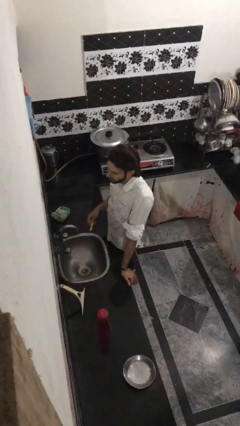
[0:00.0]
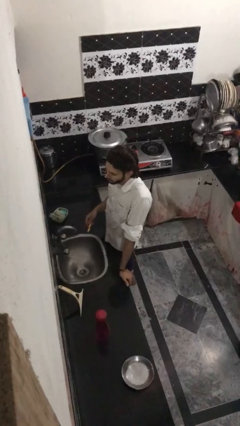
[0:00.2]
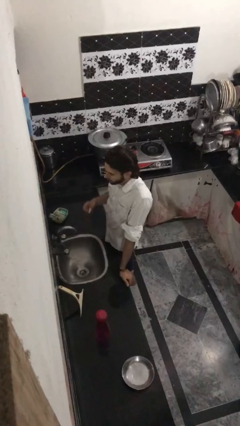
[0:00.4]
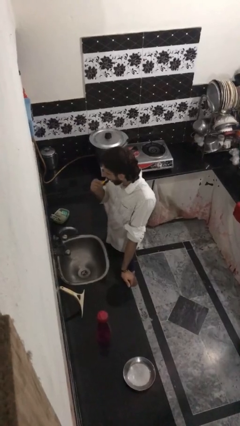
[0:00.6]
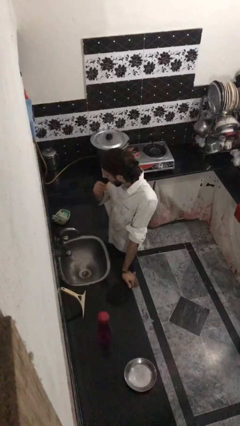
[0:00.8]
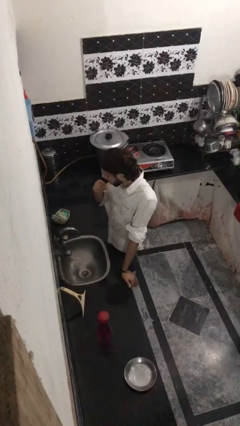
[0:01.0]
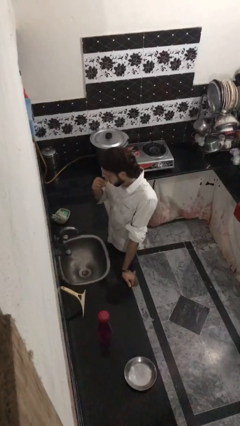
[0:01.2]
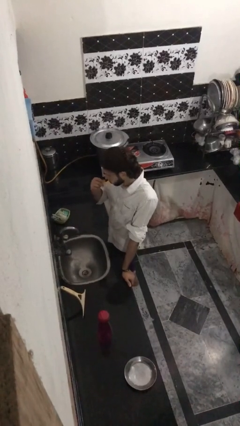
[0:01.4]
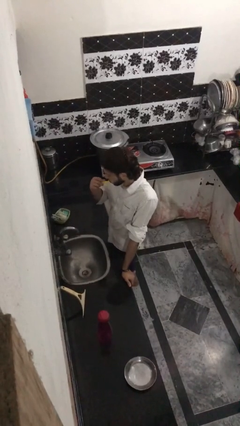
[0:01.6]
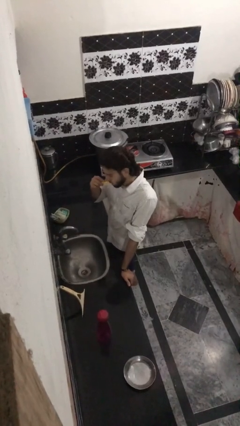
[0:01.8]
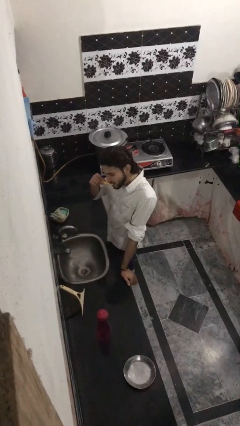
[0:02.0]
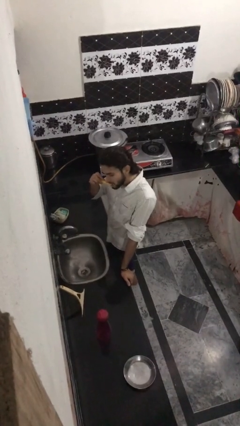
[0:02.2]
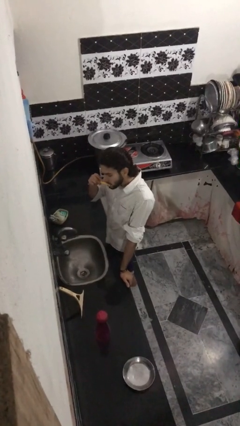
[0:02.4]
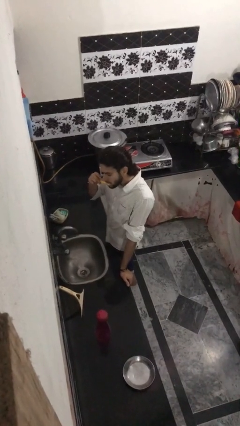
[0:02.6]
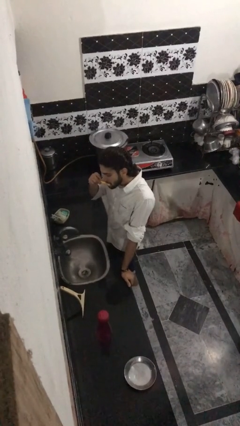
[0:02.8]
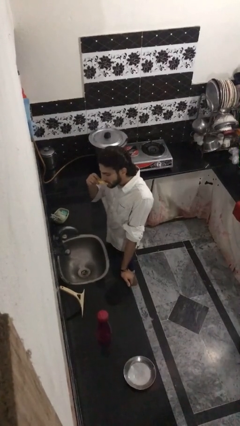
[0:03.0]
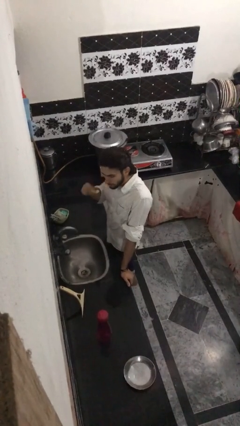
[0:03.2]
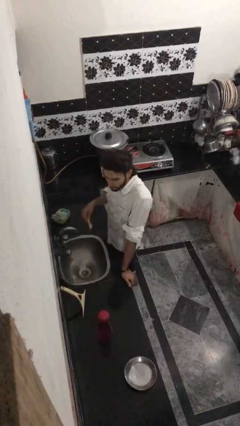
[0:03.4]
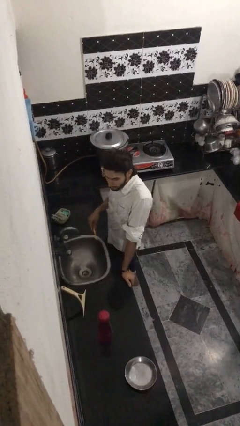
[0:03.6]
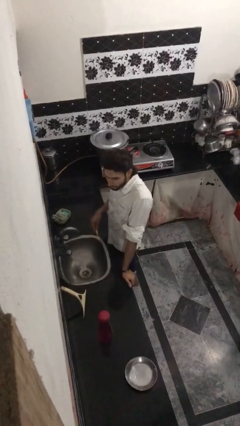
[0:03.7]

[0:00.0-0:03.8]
person brushes teeth

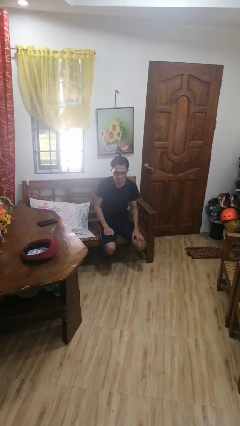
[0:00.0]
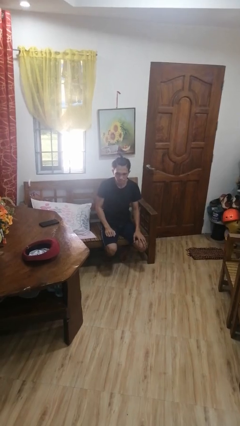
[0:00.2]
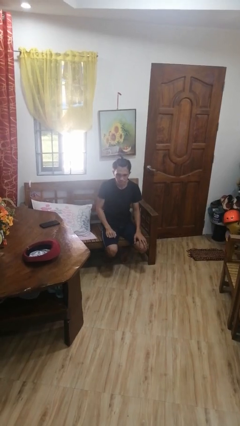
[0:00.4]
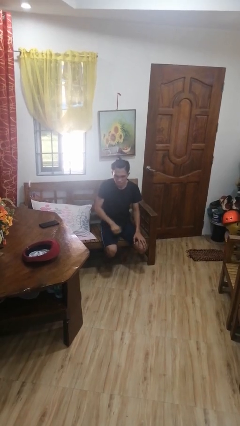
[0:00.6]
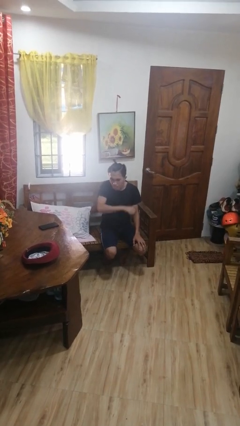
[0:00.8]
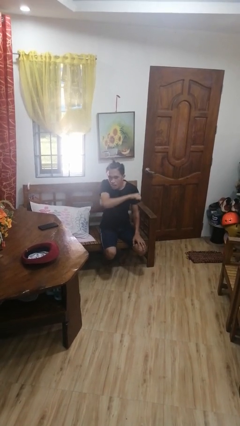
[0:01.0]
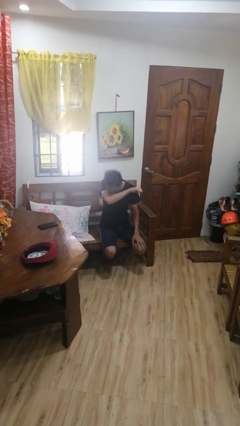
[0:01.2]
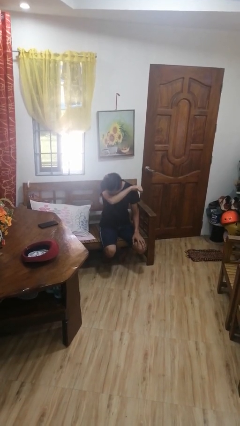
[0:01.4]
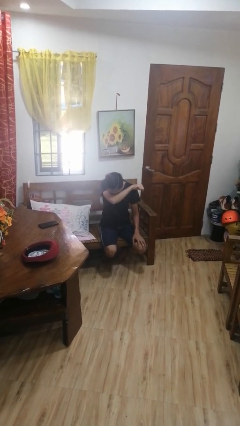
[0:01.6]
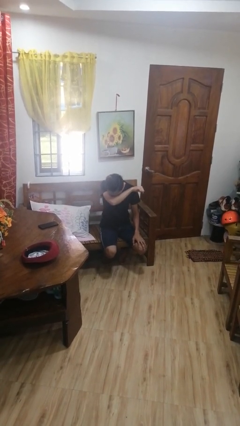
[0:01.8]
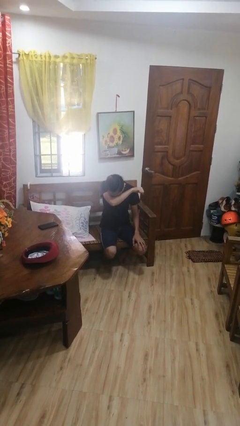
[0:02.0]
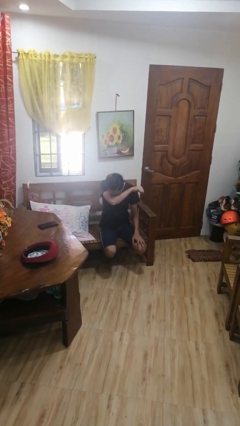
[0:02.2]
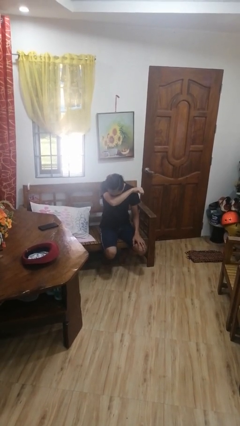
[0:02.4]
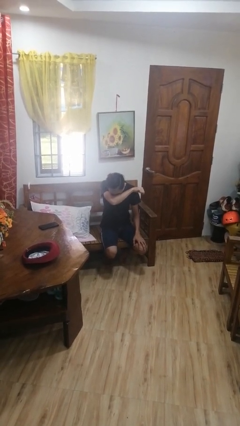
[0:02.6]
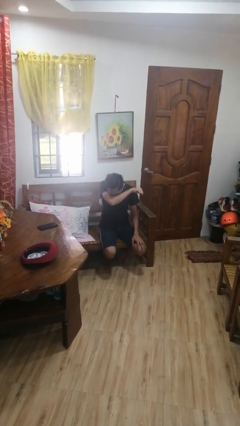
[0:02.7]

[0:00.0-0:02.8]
person sneezes into arm

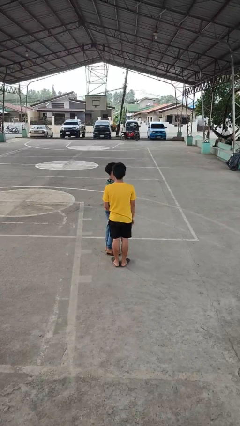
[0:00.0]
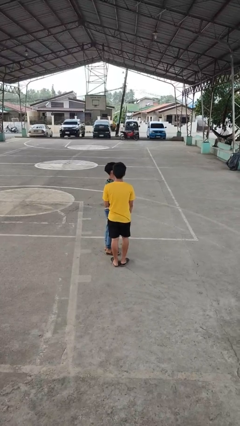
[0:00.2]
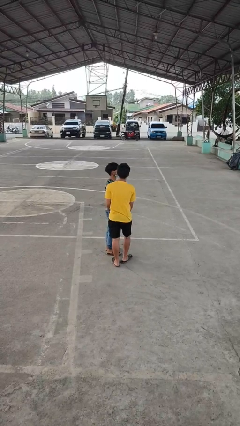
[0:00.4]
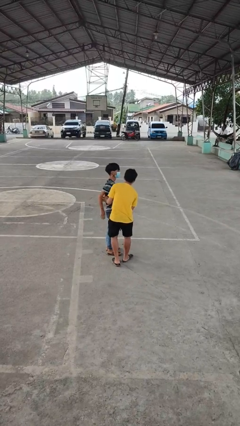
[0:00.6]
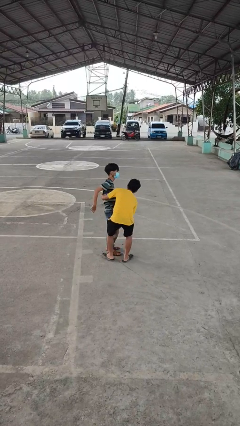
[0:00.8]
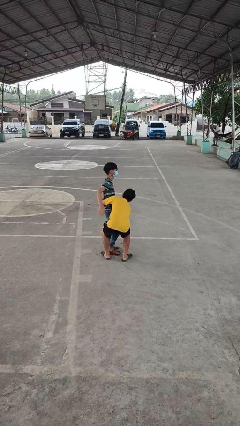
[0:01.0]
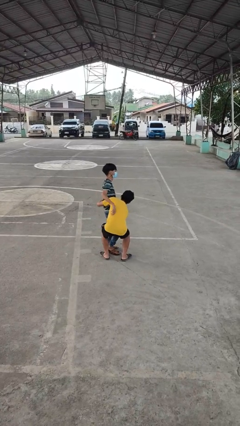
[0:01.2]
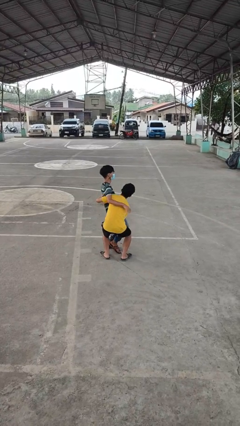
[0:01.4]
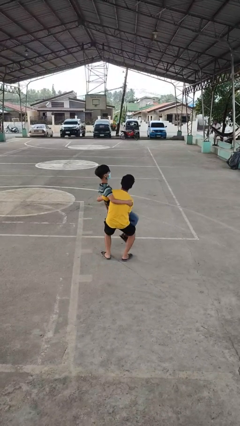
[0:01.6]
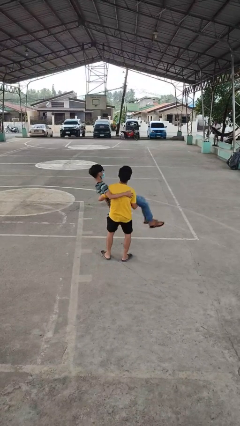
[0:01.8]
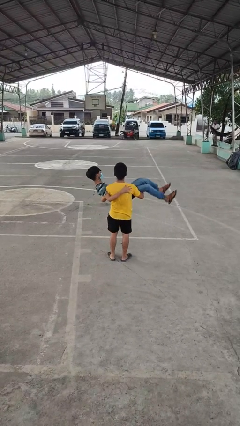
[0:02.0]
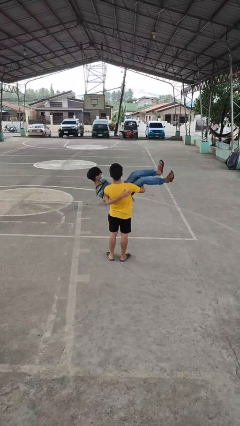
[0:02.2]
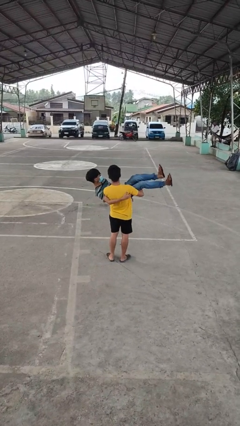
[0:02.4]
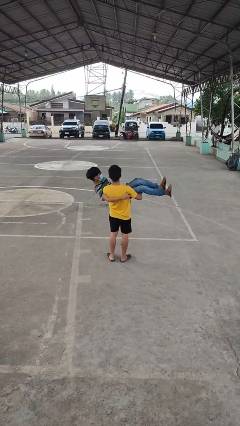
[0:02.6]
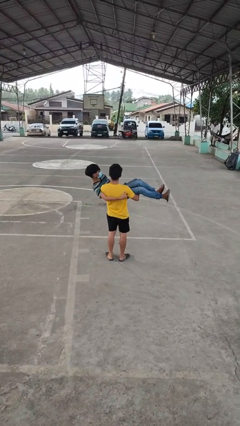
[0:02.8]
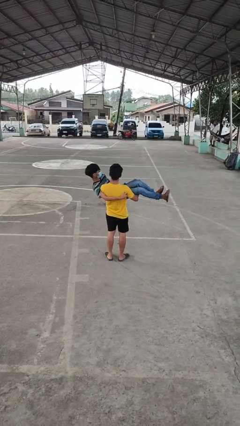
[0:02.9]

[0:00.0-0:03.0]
person picks up person

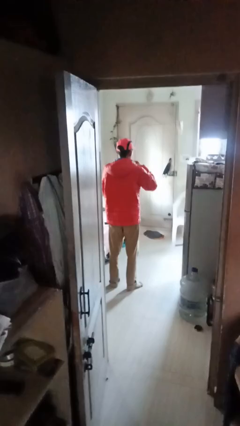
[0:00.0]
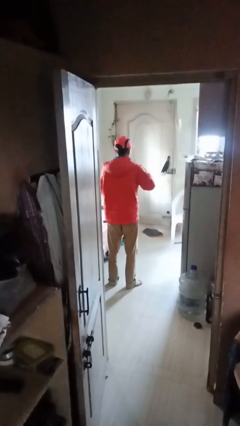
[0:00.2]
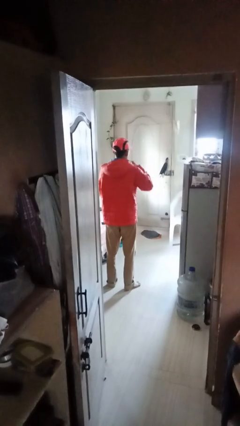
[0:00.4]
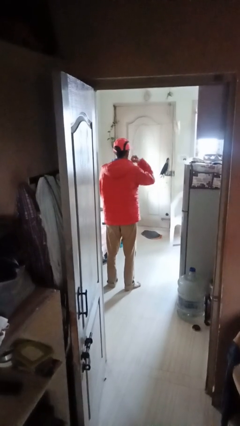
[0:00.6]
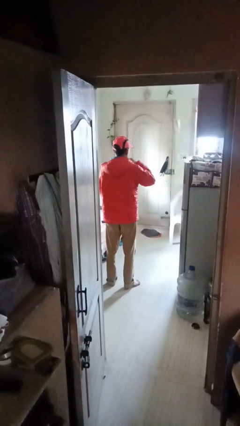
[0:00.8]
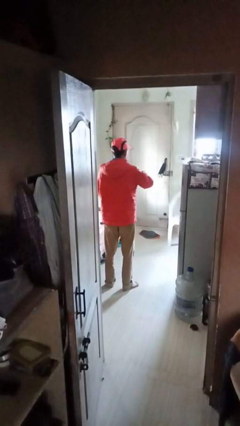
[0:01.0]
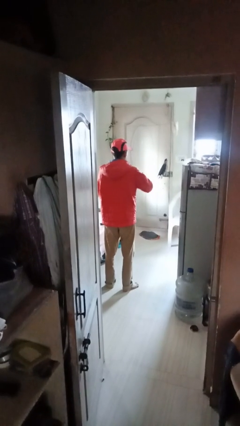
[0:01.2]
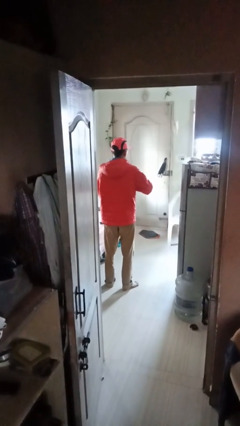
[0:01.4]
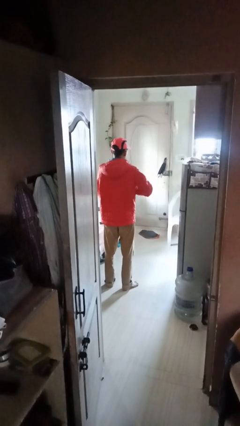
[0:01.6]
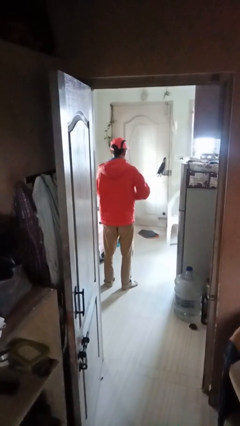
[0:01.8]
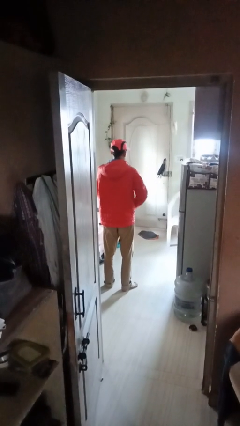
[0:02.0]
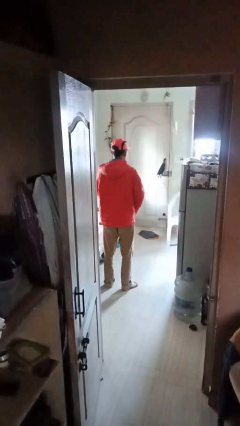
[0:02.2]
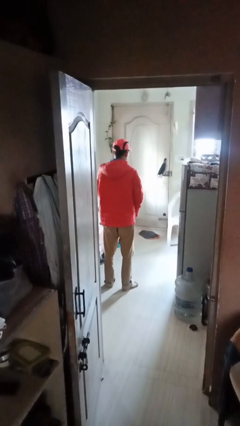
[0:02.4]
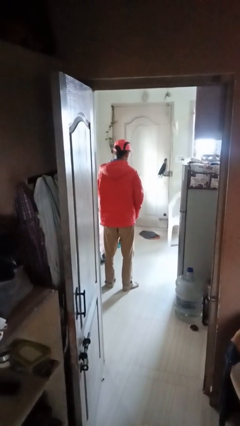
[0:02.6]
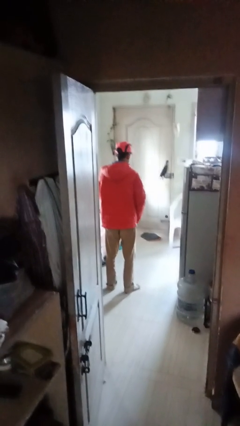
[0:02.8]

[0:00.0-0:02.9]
person unzips jacket

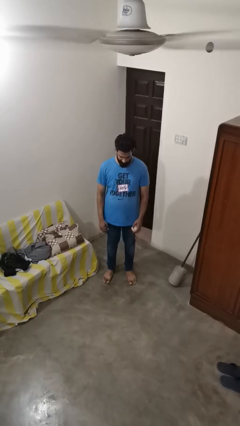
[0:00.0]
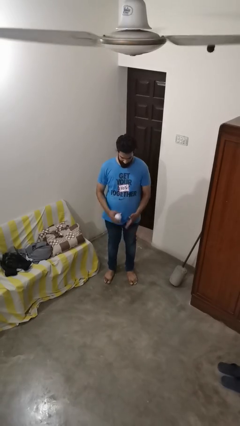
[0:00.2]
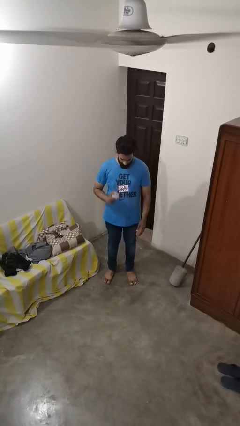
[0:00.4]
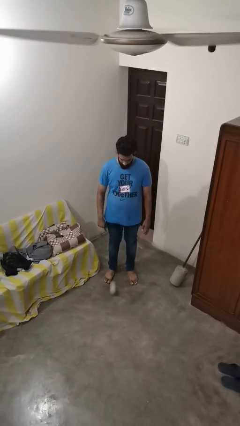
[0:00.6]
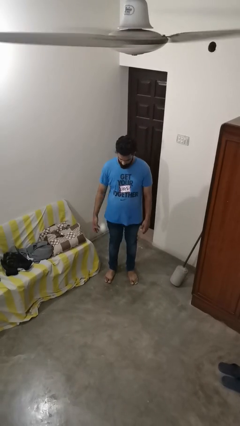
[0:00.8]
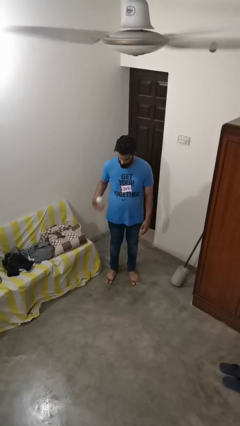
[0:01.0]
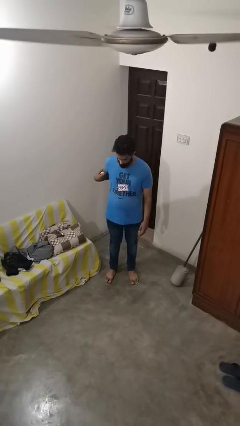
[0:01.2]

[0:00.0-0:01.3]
person bounces ball on floor

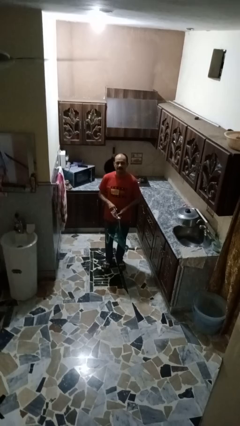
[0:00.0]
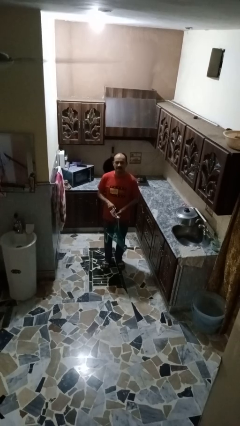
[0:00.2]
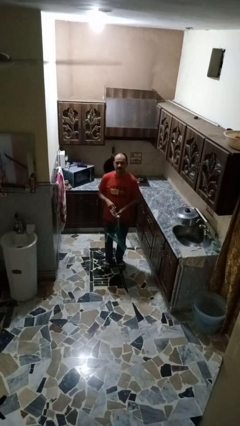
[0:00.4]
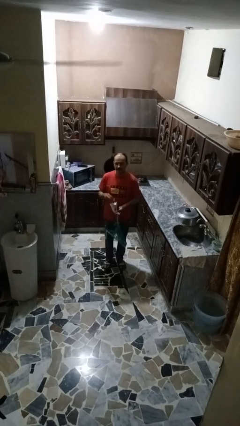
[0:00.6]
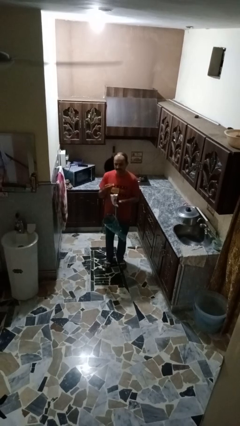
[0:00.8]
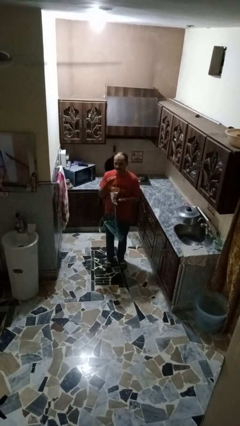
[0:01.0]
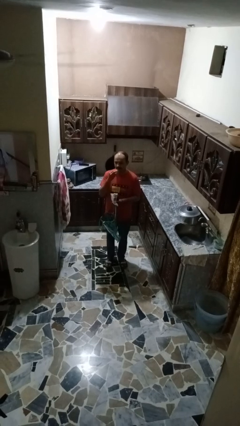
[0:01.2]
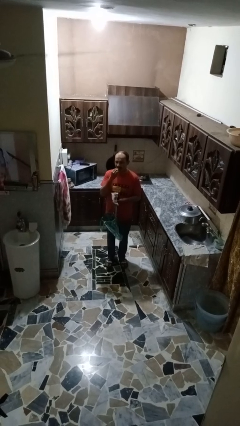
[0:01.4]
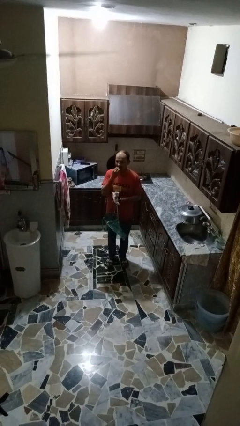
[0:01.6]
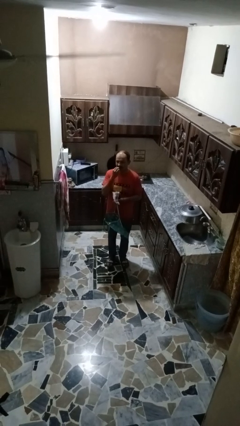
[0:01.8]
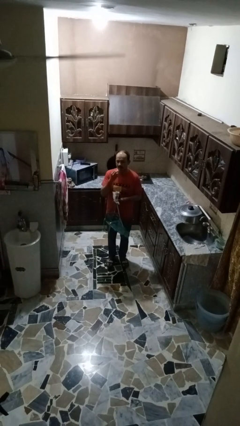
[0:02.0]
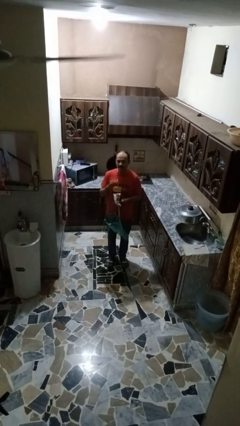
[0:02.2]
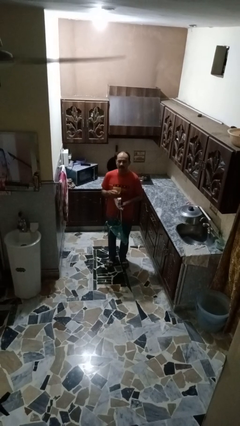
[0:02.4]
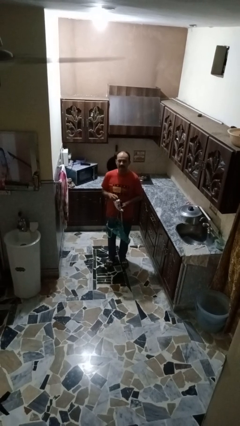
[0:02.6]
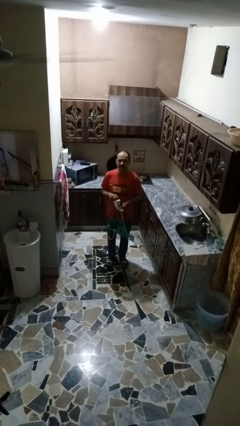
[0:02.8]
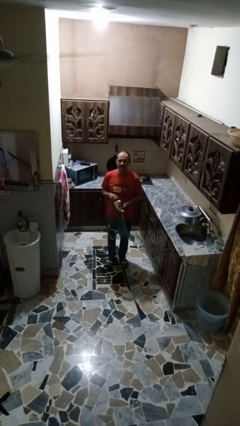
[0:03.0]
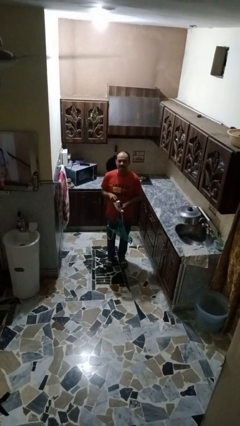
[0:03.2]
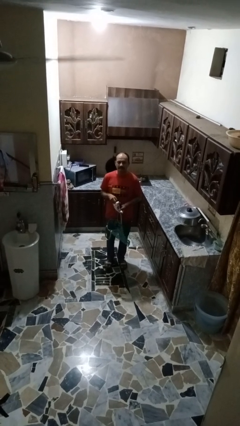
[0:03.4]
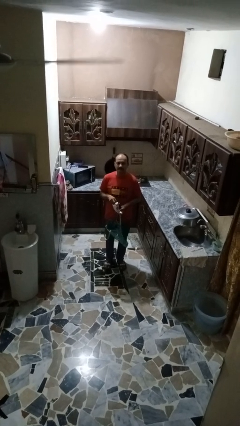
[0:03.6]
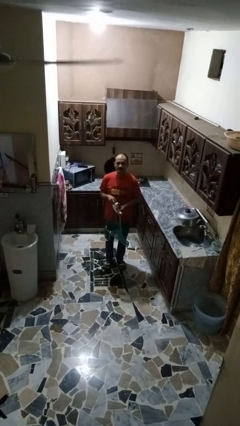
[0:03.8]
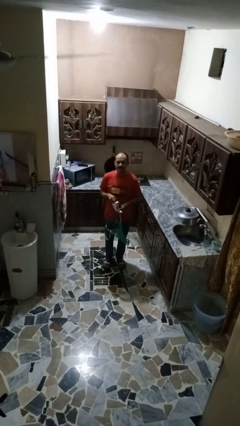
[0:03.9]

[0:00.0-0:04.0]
person eats snack from bag
